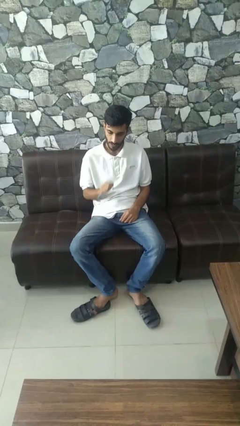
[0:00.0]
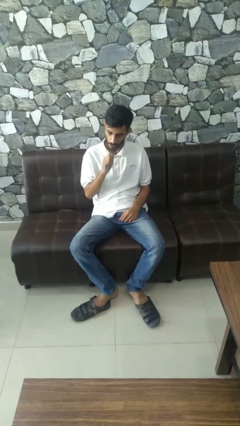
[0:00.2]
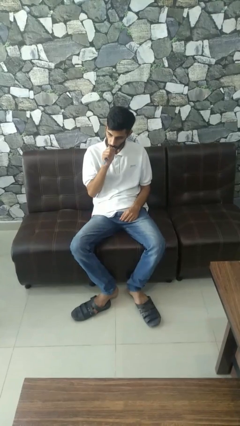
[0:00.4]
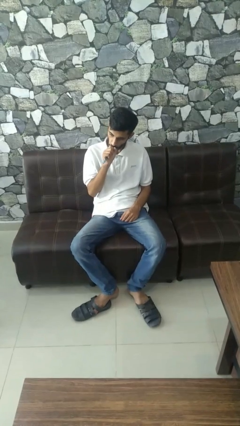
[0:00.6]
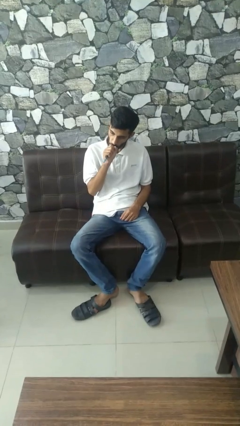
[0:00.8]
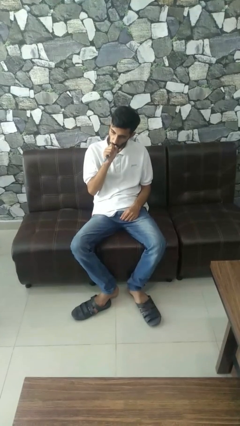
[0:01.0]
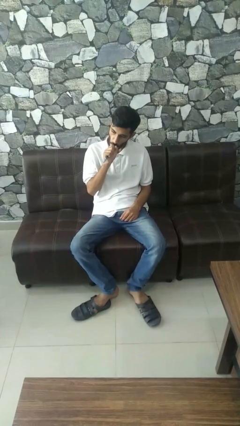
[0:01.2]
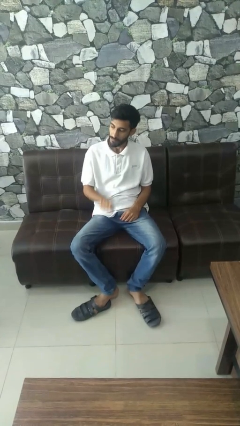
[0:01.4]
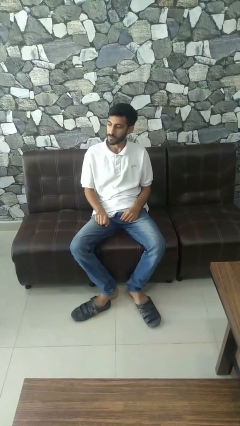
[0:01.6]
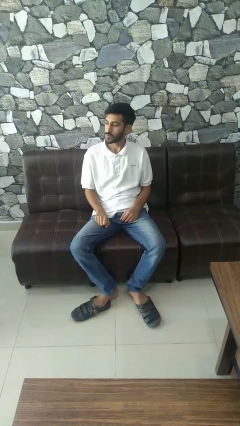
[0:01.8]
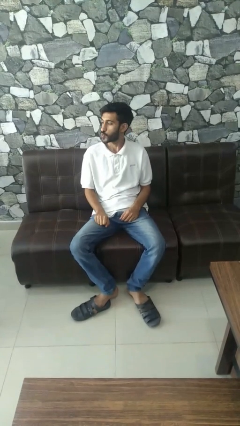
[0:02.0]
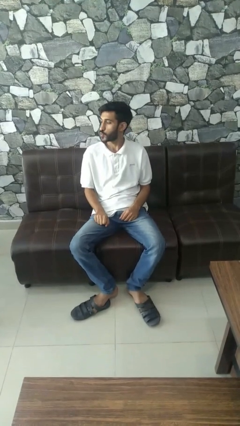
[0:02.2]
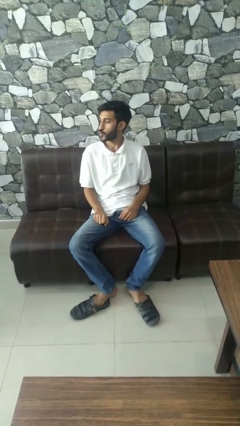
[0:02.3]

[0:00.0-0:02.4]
person vapes

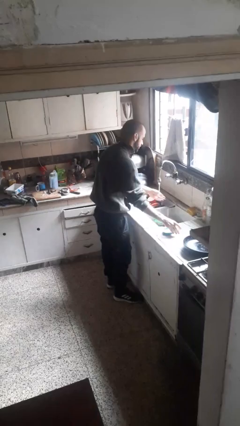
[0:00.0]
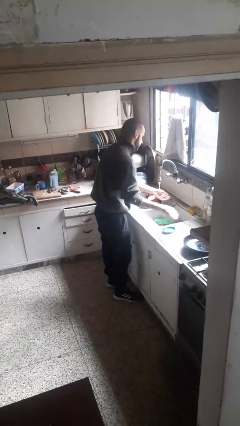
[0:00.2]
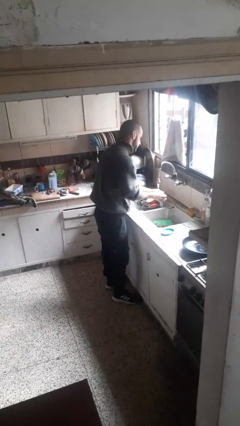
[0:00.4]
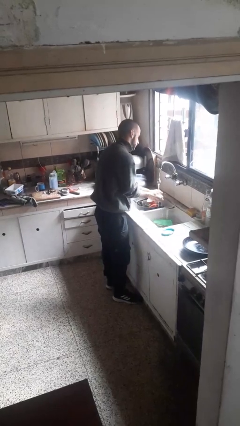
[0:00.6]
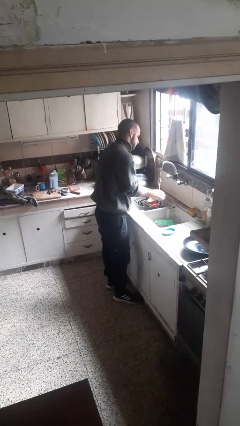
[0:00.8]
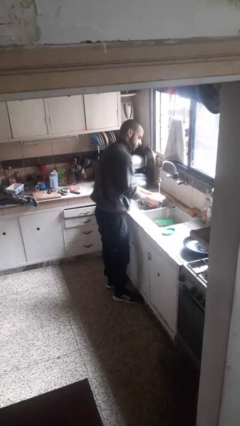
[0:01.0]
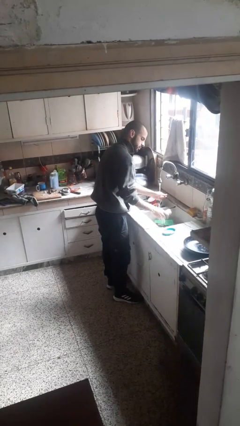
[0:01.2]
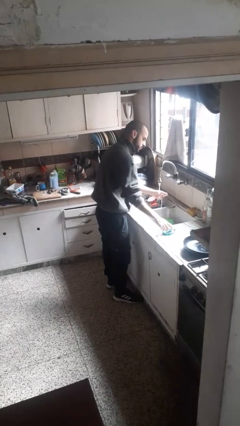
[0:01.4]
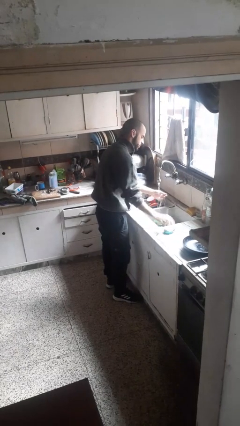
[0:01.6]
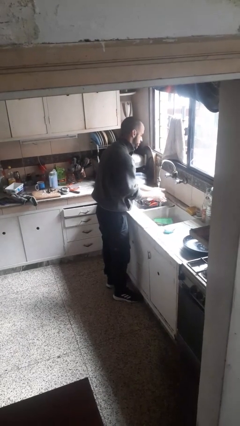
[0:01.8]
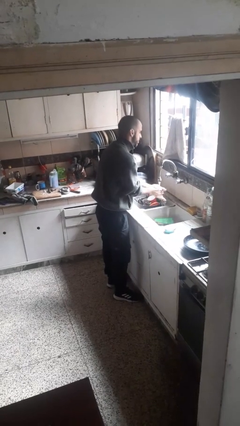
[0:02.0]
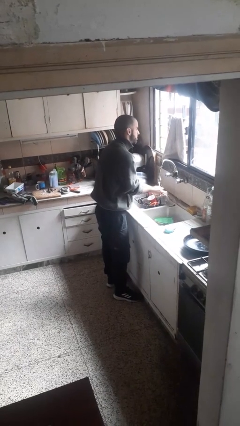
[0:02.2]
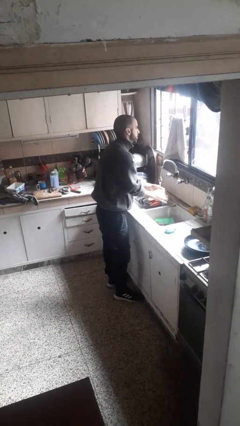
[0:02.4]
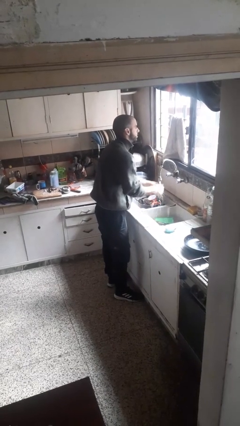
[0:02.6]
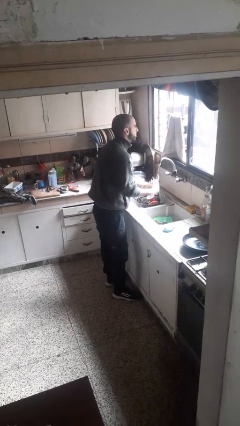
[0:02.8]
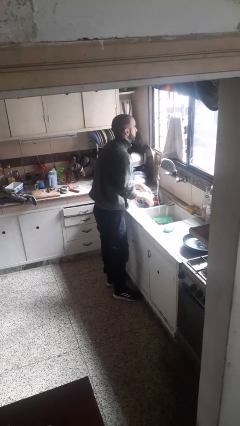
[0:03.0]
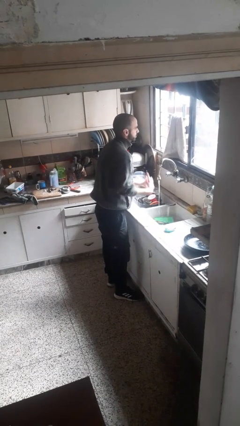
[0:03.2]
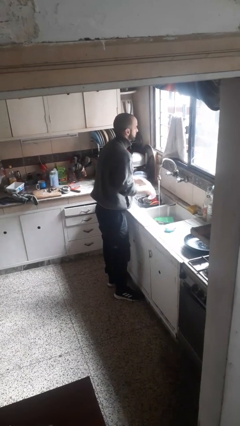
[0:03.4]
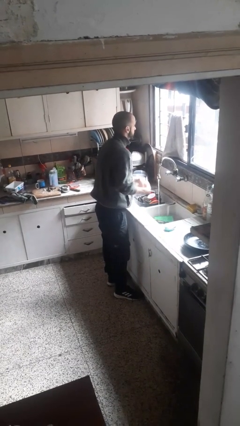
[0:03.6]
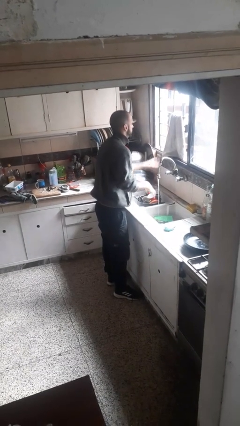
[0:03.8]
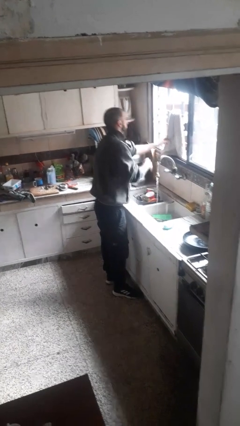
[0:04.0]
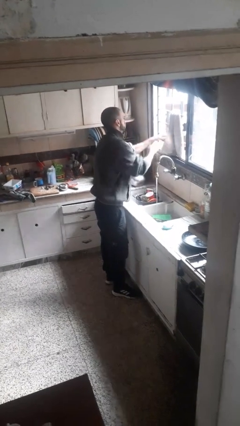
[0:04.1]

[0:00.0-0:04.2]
person washes hands

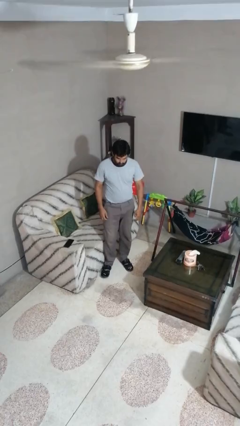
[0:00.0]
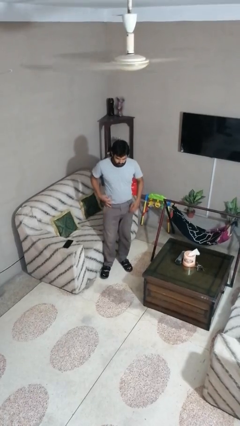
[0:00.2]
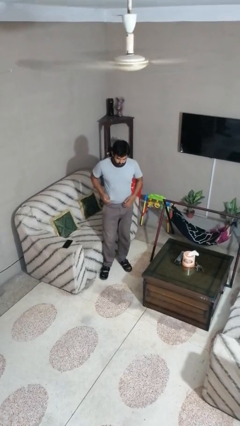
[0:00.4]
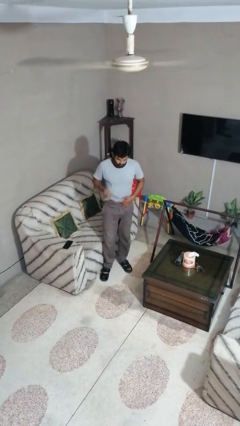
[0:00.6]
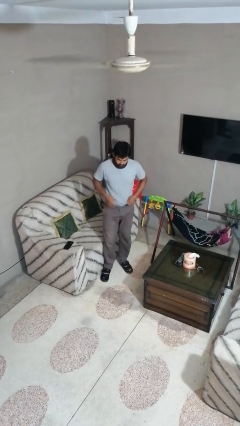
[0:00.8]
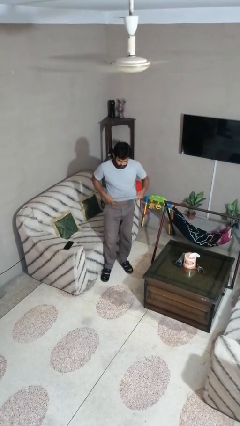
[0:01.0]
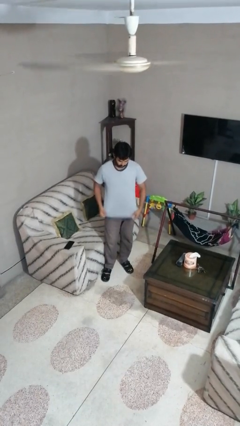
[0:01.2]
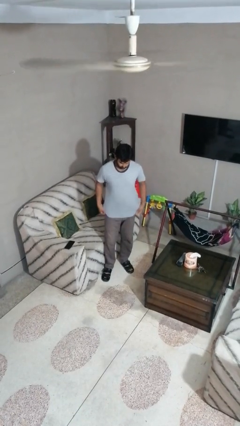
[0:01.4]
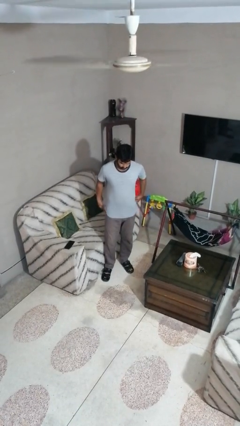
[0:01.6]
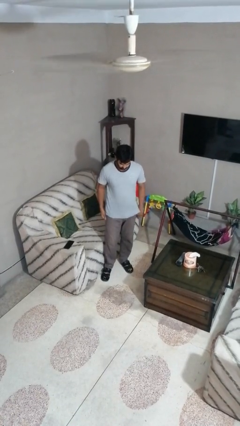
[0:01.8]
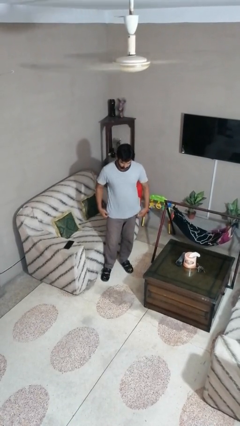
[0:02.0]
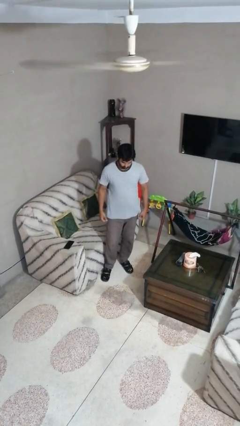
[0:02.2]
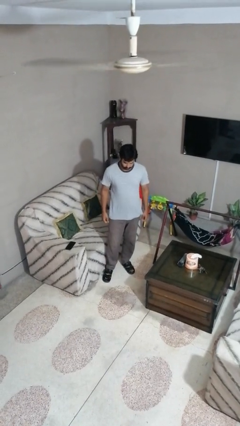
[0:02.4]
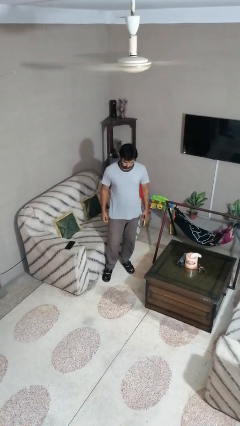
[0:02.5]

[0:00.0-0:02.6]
person untucks shirt

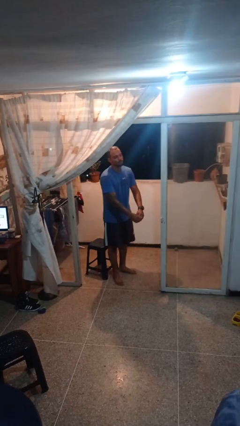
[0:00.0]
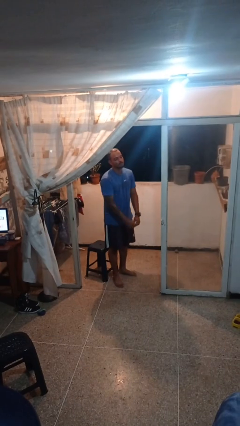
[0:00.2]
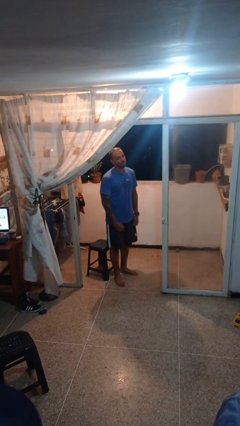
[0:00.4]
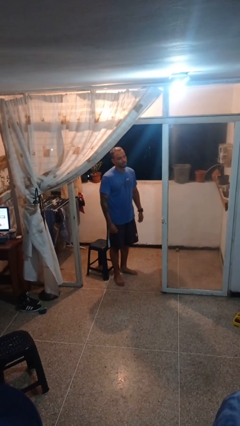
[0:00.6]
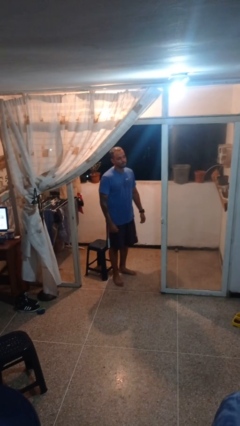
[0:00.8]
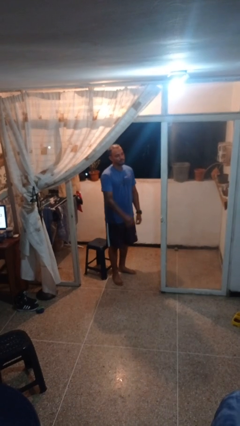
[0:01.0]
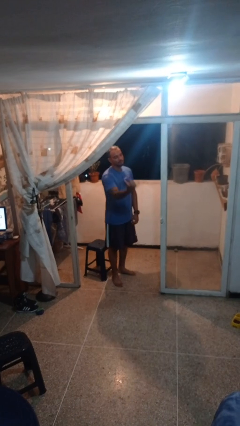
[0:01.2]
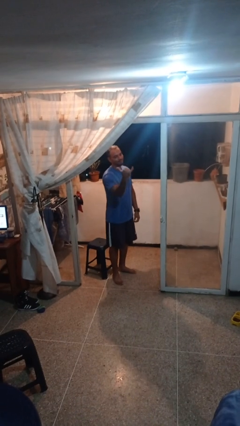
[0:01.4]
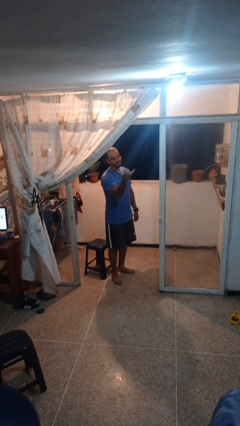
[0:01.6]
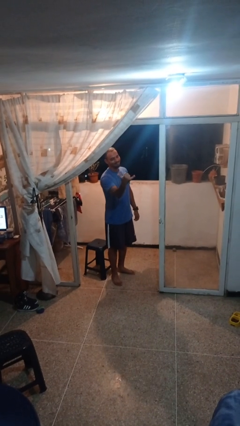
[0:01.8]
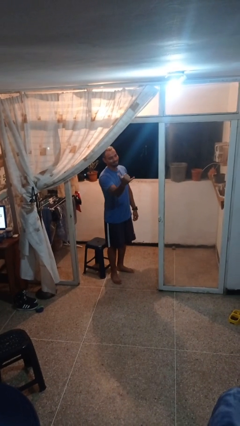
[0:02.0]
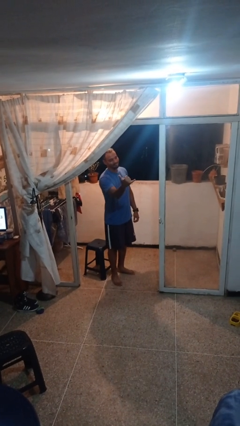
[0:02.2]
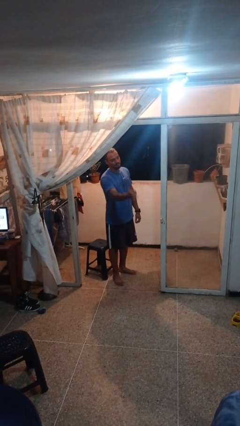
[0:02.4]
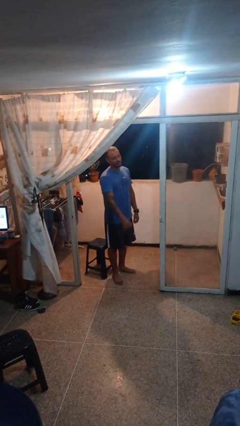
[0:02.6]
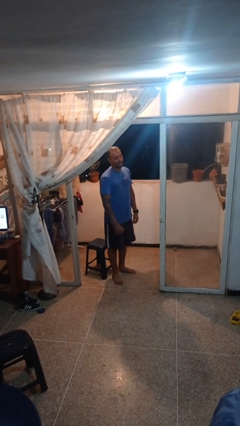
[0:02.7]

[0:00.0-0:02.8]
person gestures hang loose

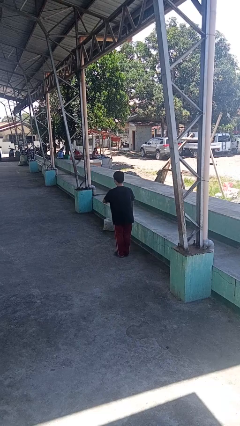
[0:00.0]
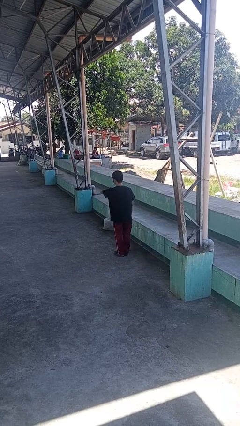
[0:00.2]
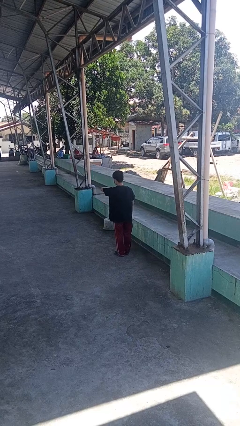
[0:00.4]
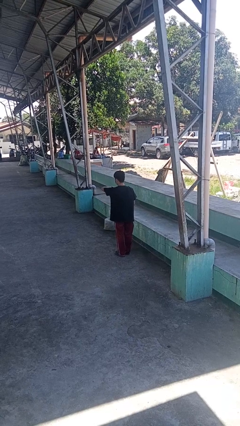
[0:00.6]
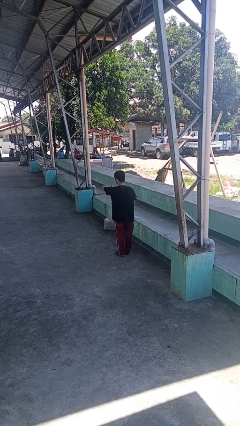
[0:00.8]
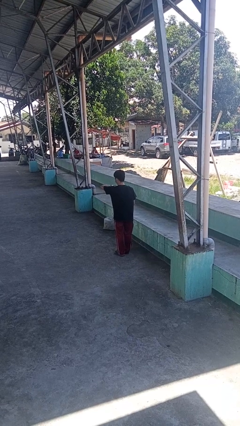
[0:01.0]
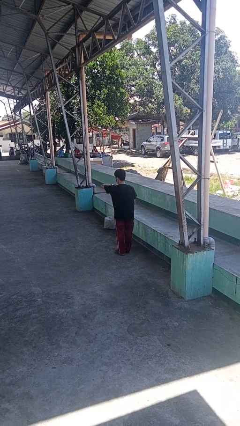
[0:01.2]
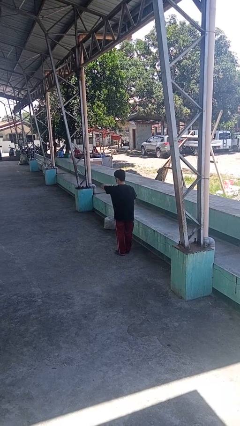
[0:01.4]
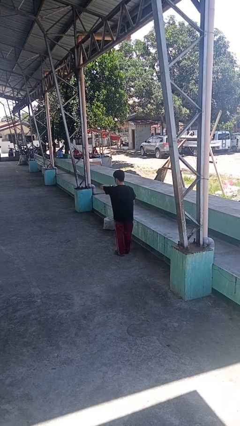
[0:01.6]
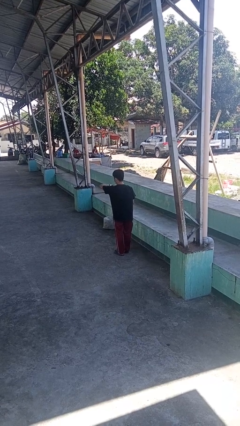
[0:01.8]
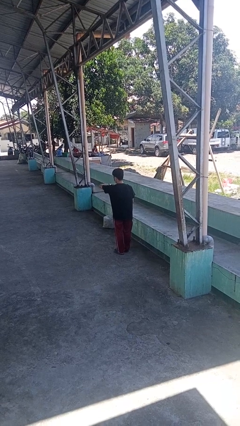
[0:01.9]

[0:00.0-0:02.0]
person looks at wristwatch

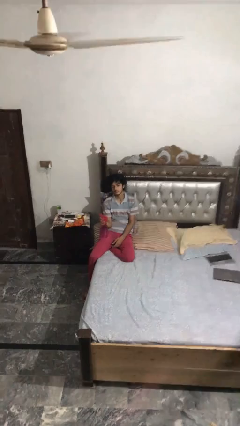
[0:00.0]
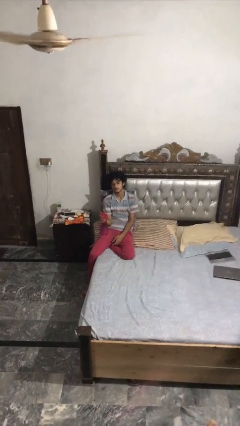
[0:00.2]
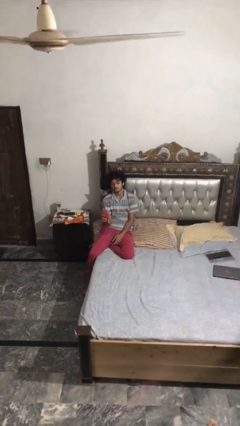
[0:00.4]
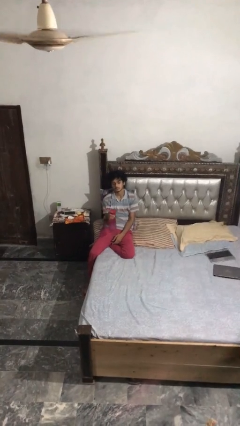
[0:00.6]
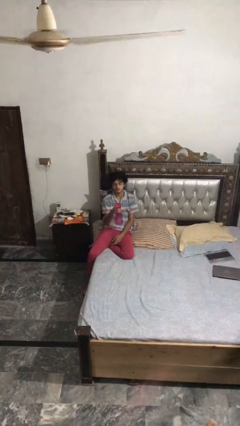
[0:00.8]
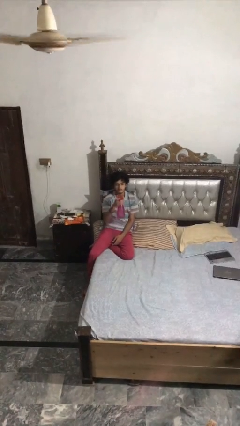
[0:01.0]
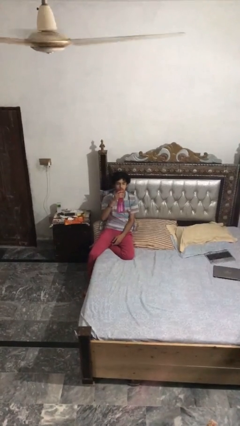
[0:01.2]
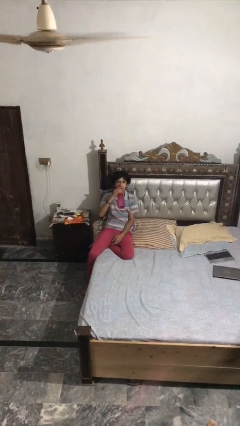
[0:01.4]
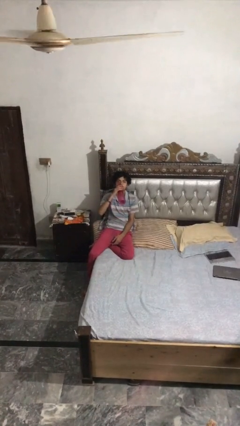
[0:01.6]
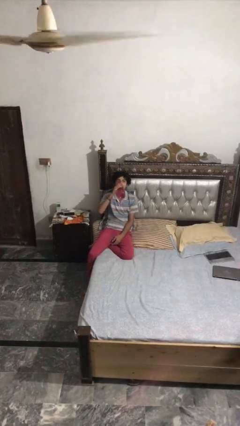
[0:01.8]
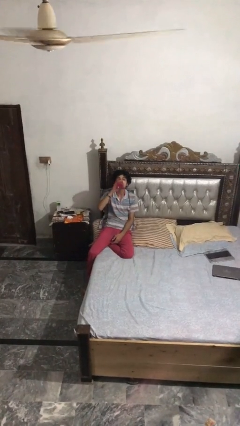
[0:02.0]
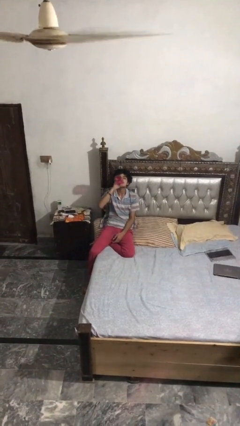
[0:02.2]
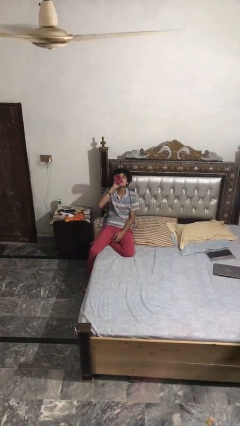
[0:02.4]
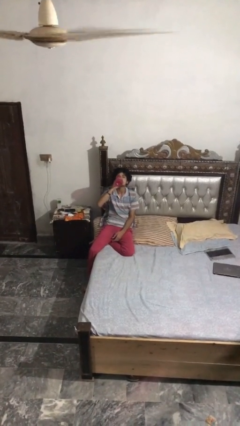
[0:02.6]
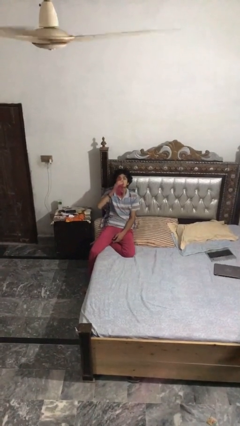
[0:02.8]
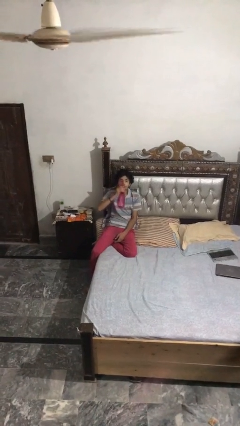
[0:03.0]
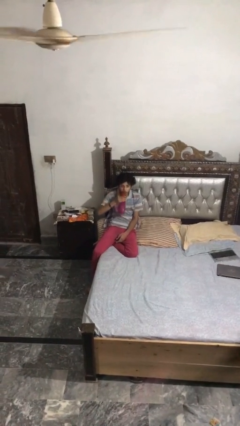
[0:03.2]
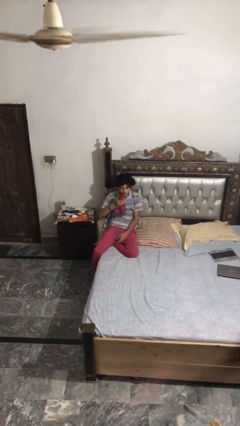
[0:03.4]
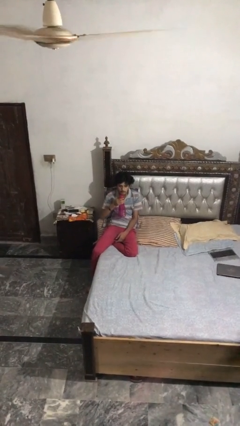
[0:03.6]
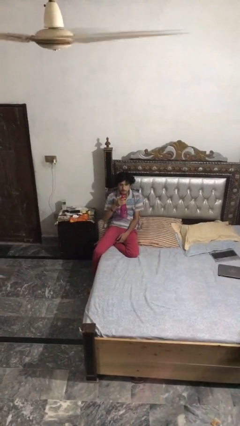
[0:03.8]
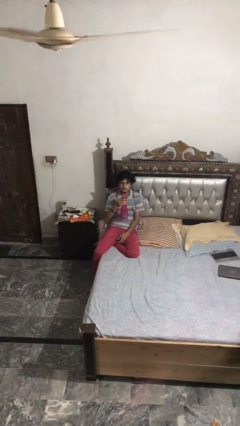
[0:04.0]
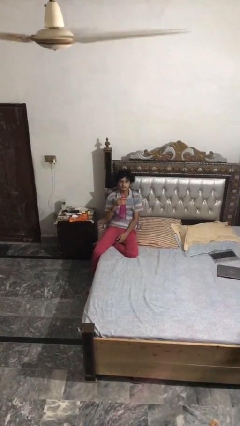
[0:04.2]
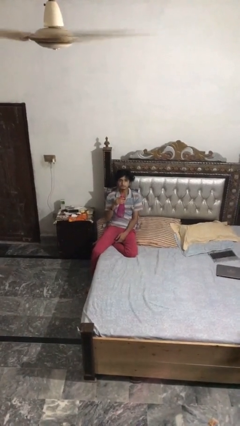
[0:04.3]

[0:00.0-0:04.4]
person drinks from bottle
